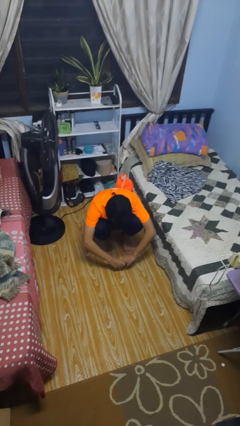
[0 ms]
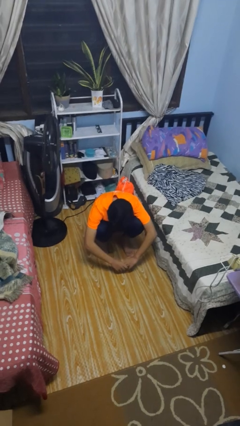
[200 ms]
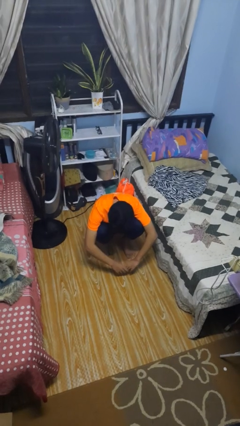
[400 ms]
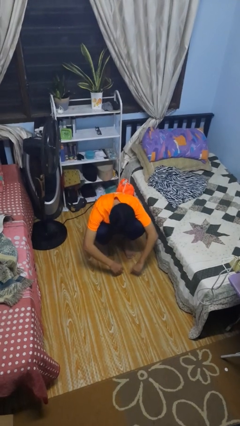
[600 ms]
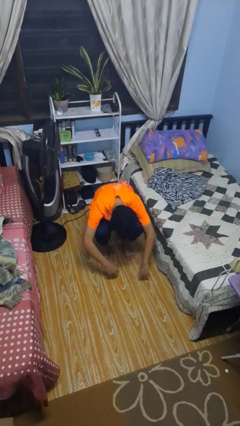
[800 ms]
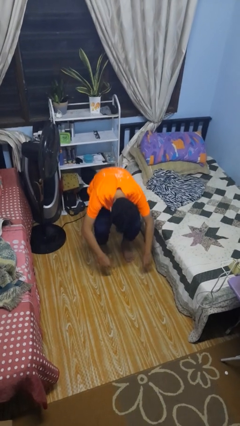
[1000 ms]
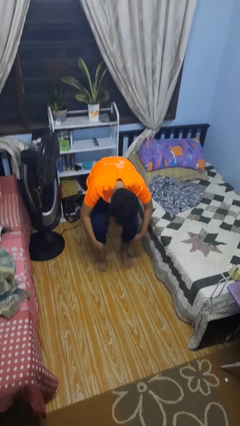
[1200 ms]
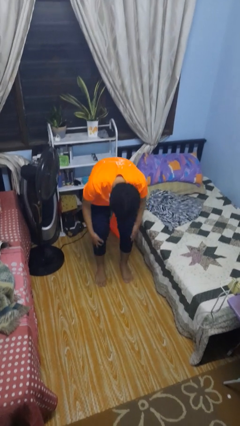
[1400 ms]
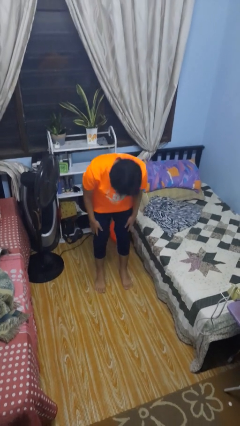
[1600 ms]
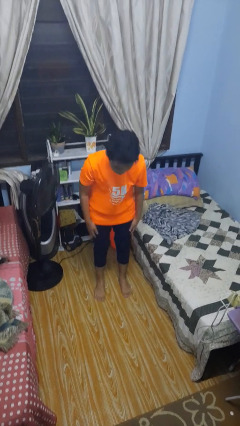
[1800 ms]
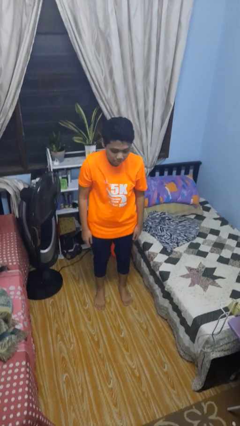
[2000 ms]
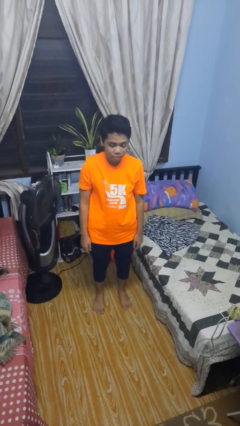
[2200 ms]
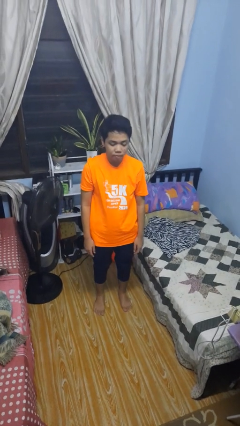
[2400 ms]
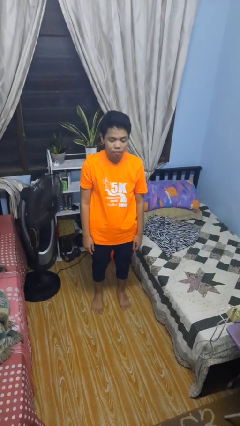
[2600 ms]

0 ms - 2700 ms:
person stands up

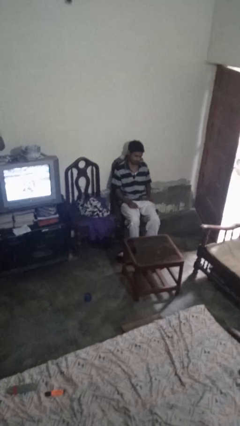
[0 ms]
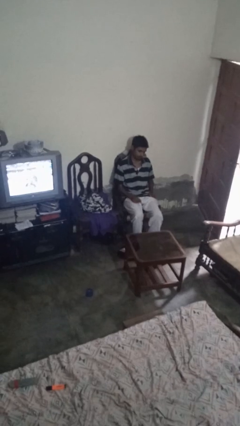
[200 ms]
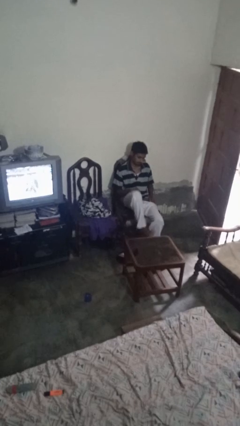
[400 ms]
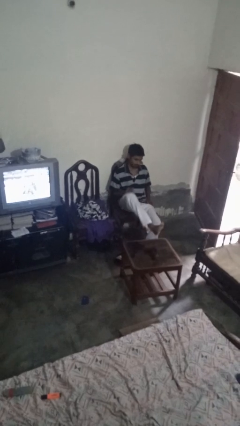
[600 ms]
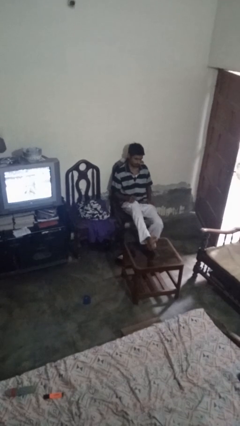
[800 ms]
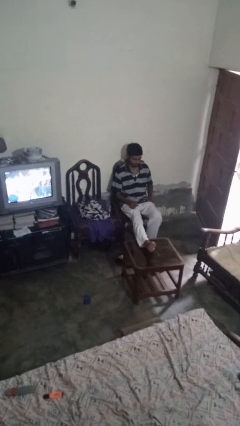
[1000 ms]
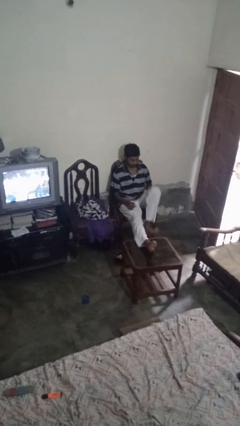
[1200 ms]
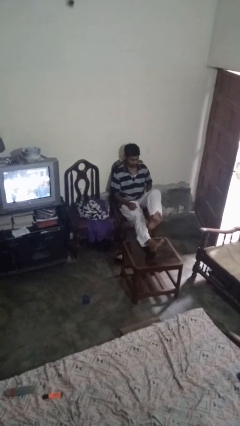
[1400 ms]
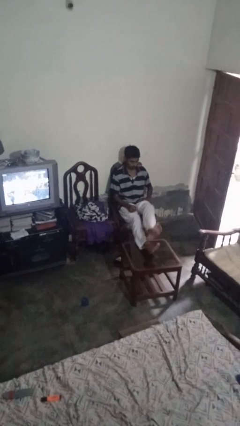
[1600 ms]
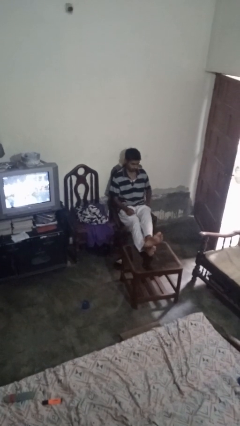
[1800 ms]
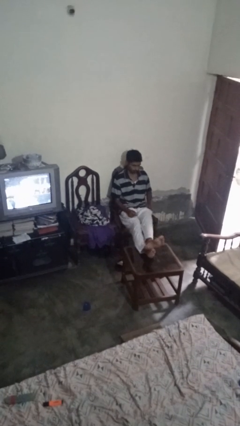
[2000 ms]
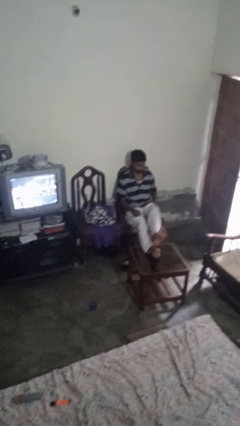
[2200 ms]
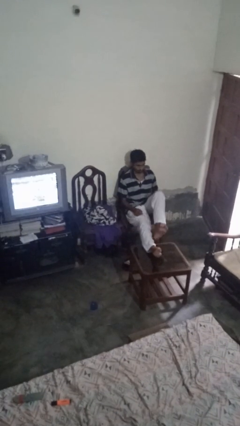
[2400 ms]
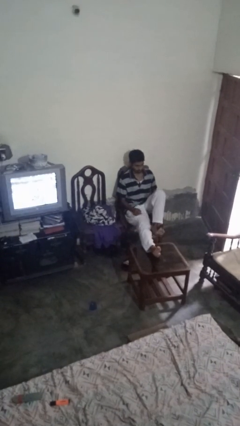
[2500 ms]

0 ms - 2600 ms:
person puts feet up

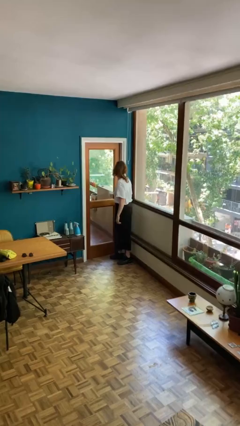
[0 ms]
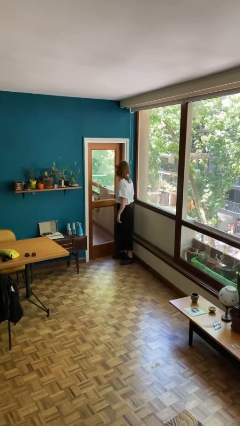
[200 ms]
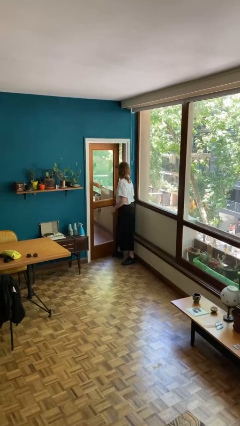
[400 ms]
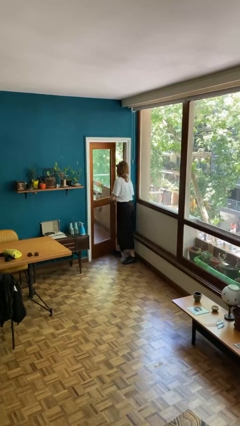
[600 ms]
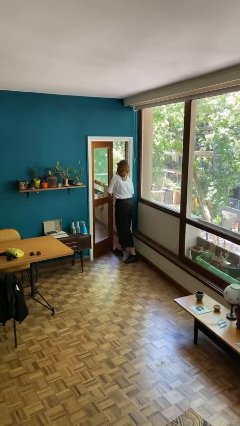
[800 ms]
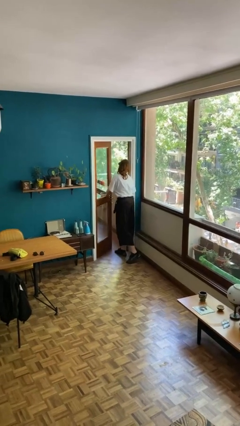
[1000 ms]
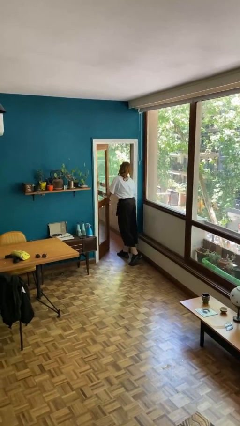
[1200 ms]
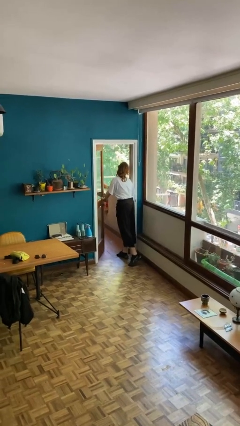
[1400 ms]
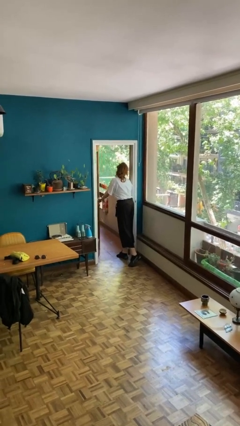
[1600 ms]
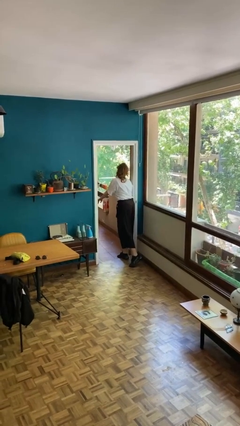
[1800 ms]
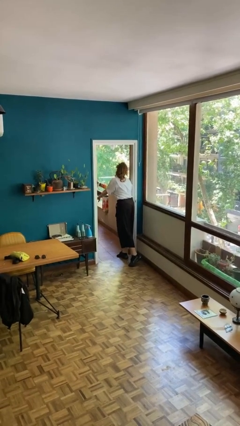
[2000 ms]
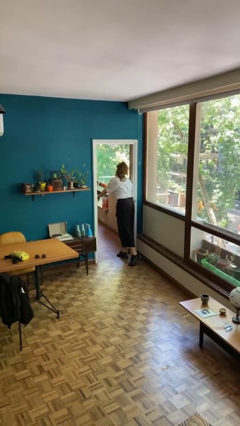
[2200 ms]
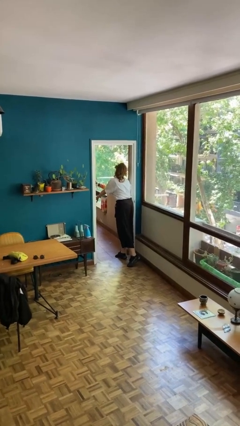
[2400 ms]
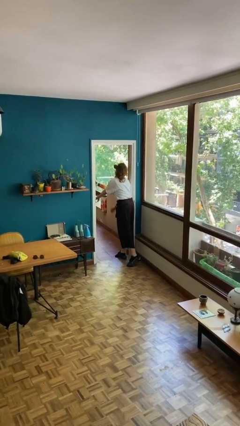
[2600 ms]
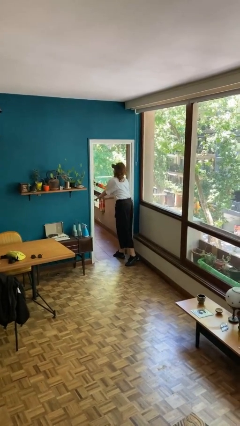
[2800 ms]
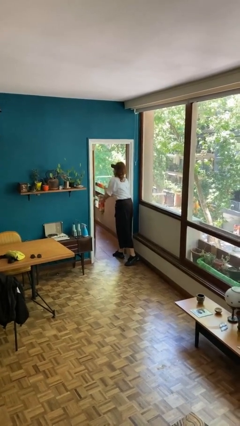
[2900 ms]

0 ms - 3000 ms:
person opens facility door

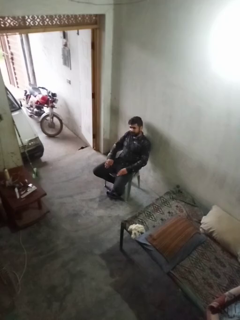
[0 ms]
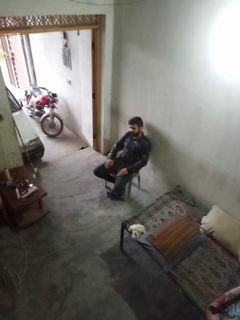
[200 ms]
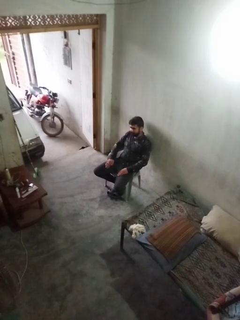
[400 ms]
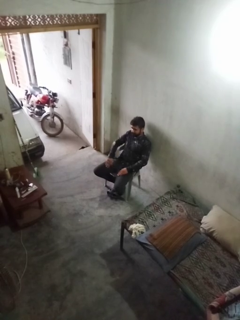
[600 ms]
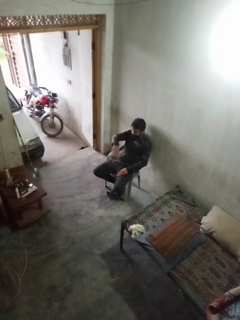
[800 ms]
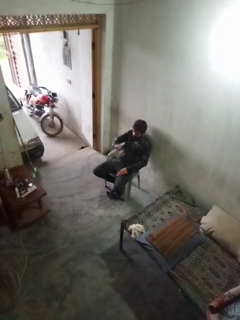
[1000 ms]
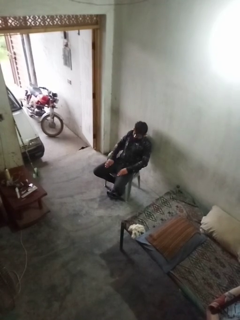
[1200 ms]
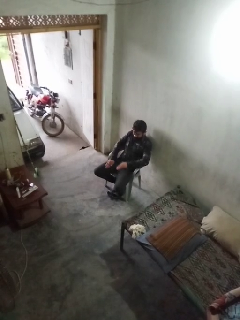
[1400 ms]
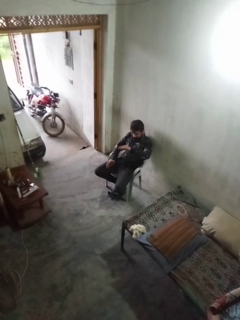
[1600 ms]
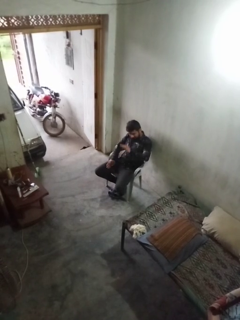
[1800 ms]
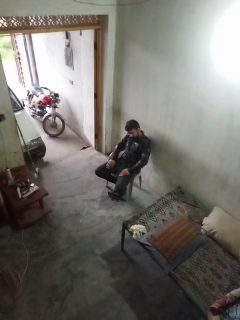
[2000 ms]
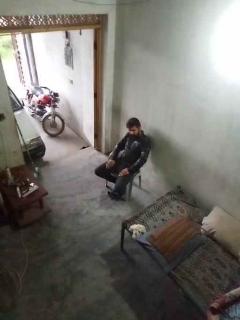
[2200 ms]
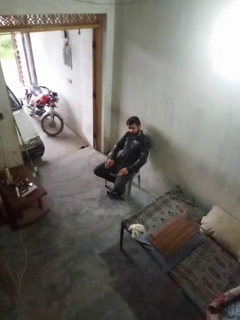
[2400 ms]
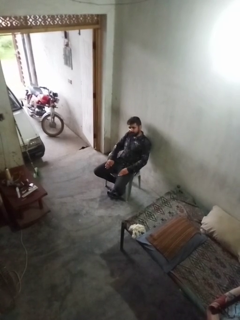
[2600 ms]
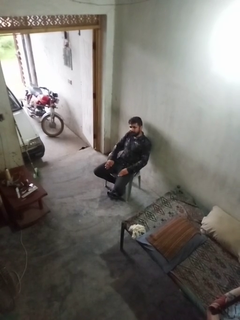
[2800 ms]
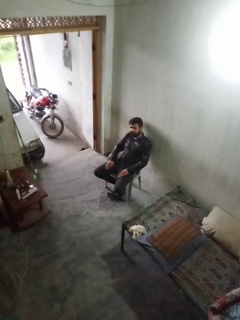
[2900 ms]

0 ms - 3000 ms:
person slaps hands on thighs

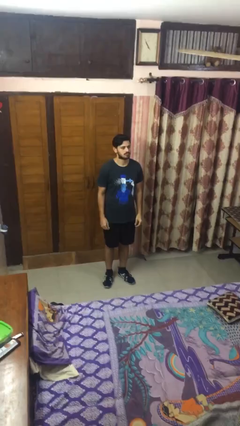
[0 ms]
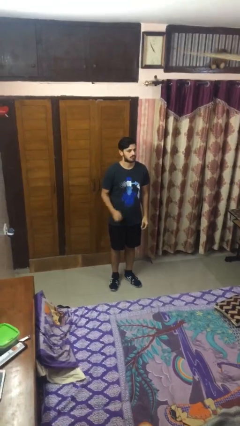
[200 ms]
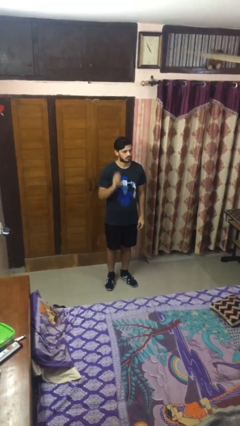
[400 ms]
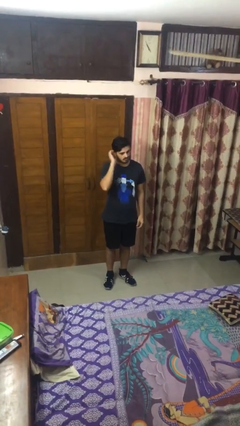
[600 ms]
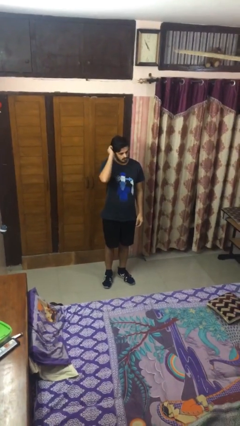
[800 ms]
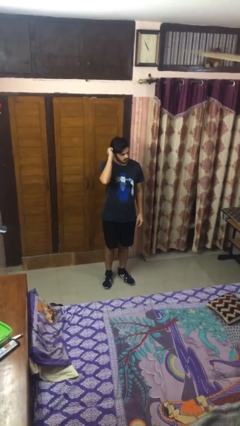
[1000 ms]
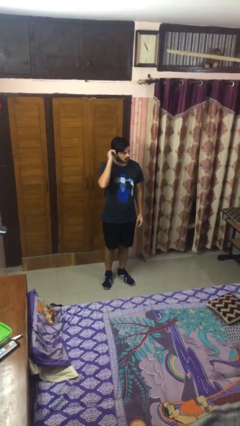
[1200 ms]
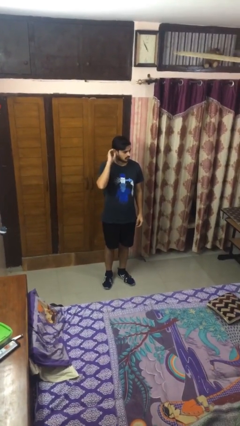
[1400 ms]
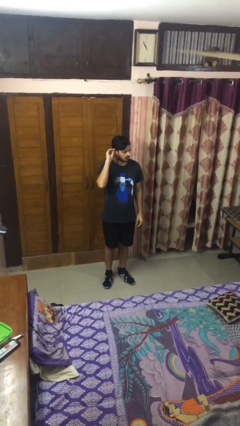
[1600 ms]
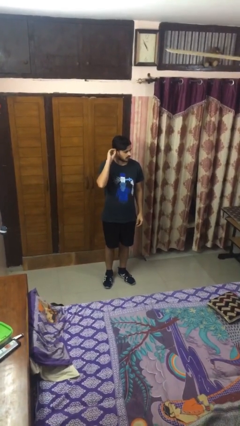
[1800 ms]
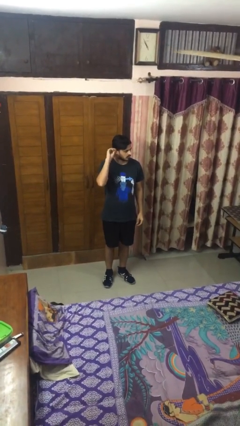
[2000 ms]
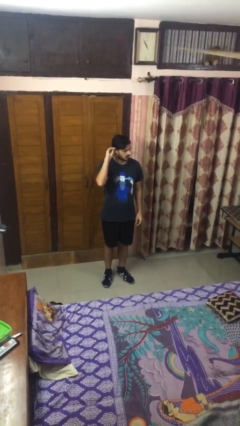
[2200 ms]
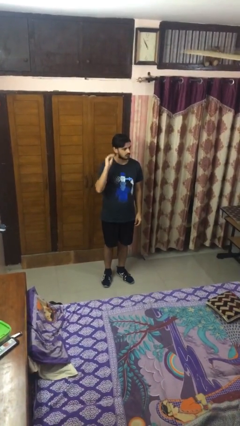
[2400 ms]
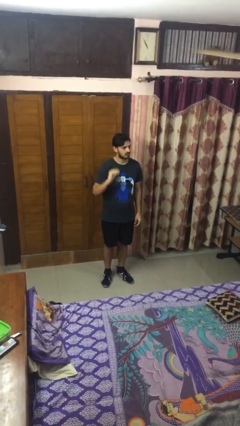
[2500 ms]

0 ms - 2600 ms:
person touches earlobe

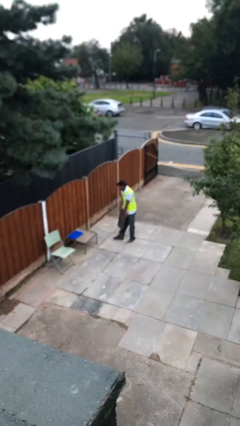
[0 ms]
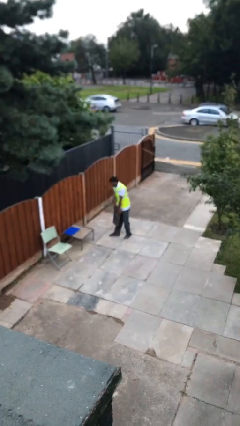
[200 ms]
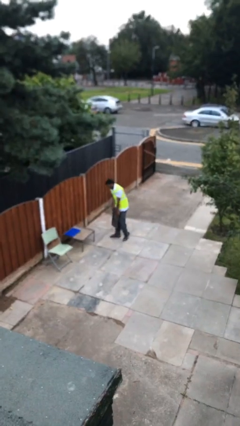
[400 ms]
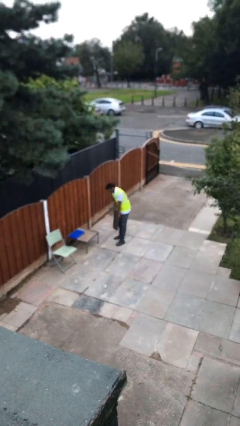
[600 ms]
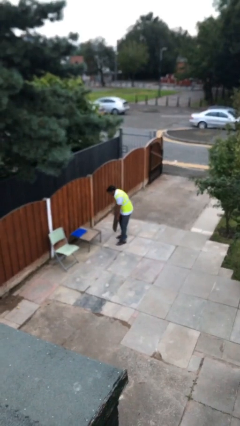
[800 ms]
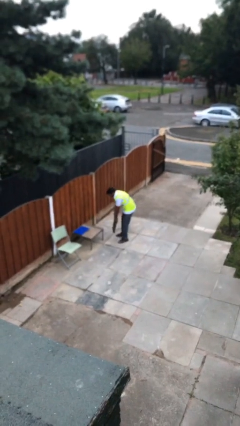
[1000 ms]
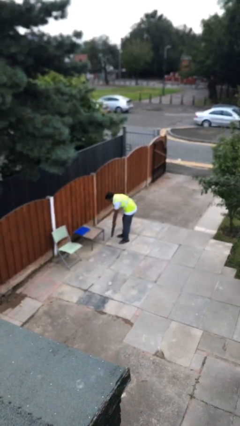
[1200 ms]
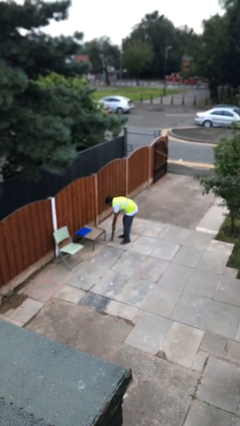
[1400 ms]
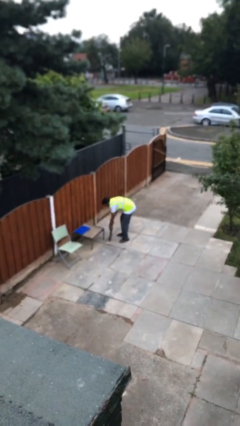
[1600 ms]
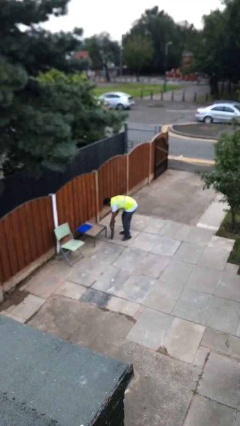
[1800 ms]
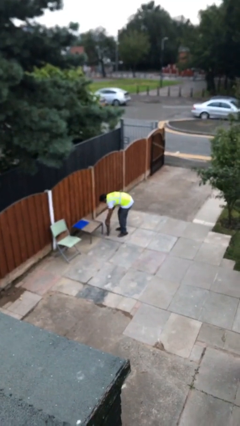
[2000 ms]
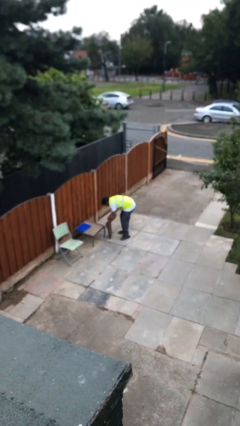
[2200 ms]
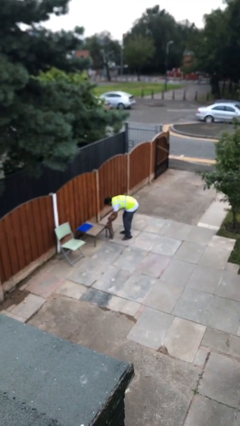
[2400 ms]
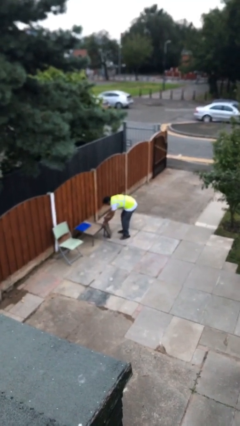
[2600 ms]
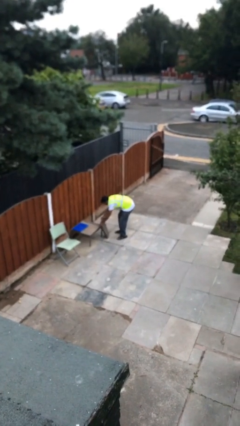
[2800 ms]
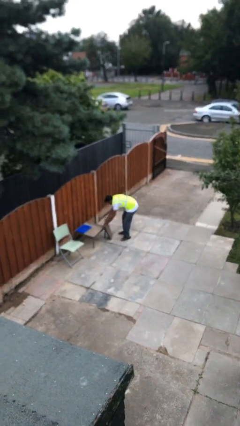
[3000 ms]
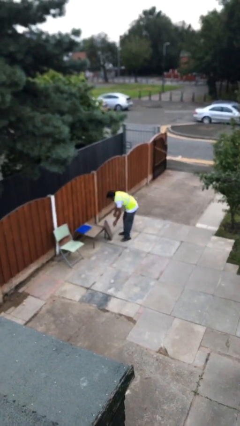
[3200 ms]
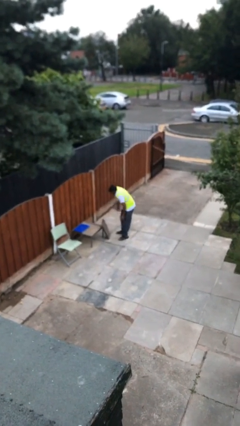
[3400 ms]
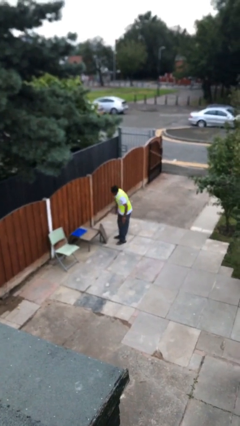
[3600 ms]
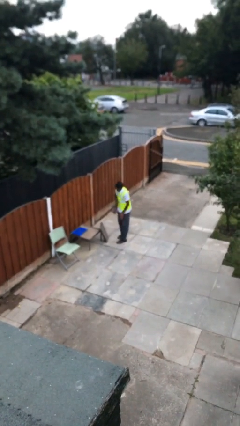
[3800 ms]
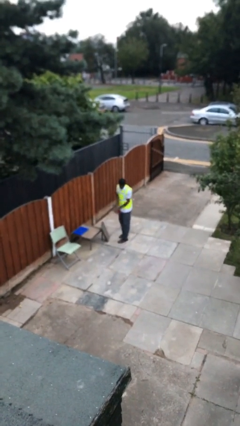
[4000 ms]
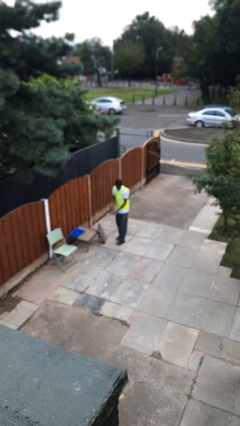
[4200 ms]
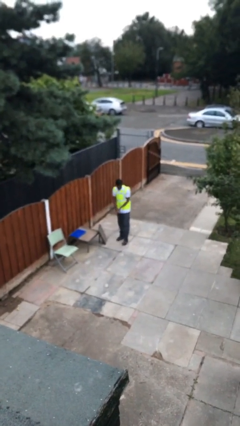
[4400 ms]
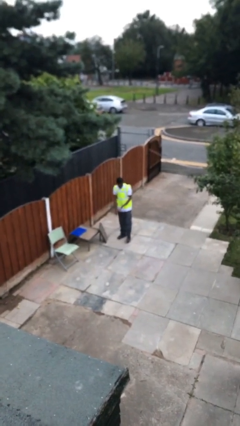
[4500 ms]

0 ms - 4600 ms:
person puts down object on floor
